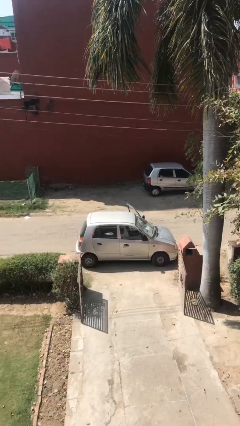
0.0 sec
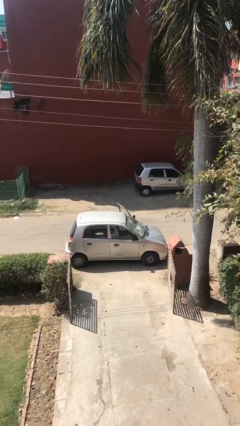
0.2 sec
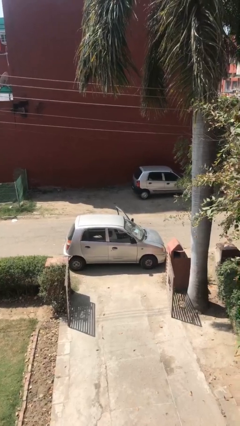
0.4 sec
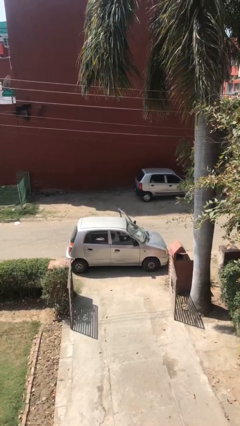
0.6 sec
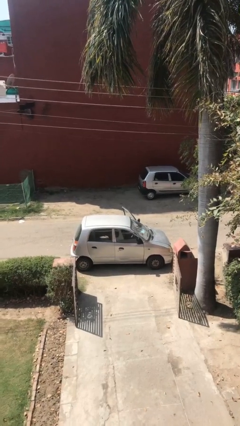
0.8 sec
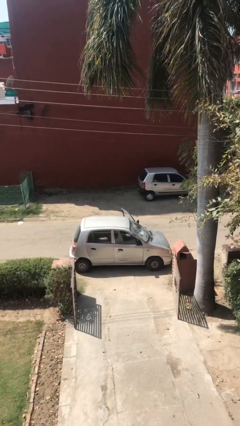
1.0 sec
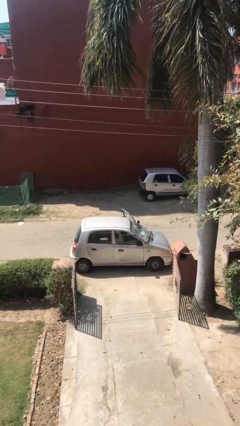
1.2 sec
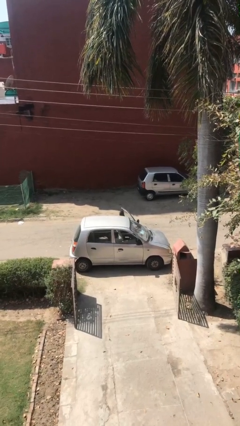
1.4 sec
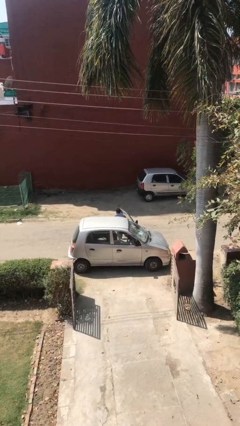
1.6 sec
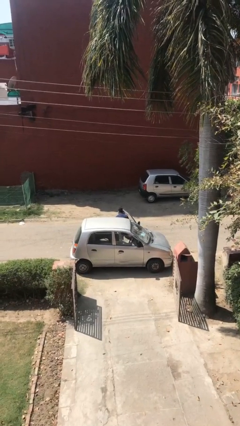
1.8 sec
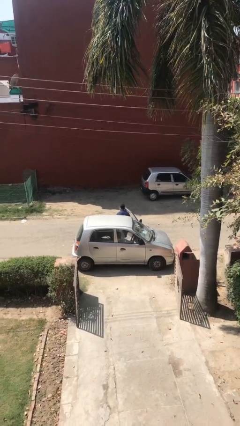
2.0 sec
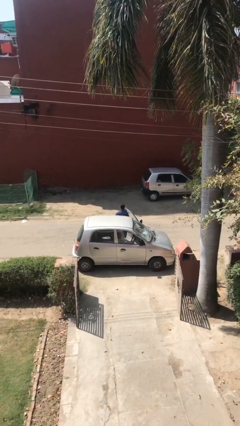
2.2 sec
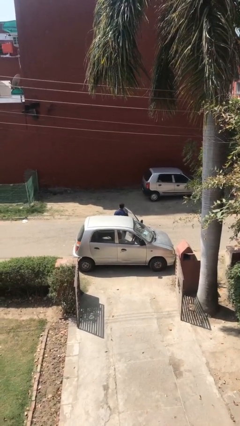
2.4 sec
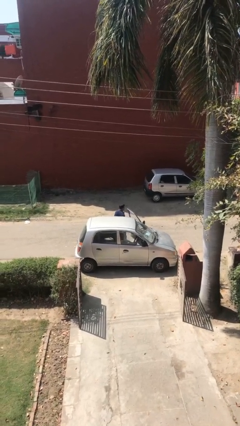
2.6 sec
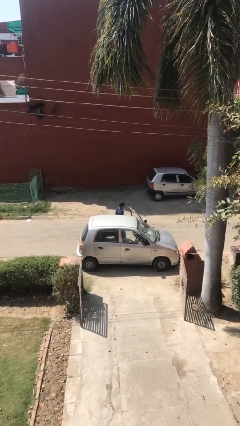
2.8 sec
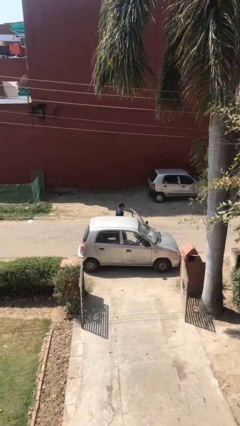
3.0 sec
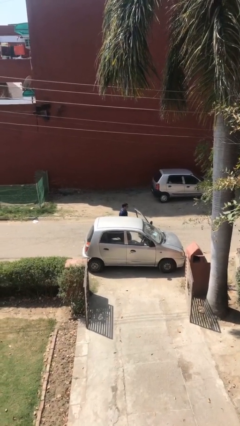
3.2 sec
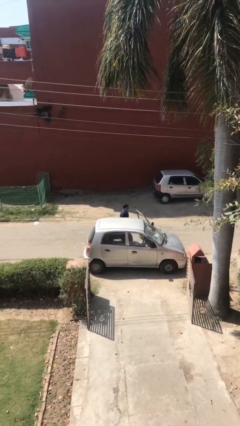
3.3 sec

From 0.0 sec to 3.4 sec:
person exits car

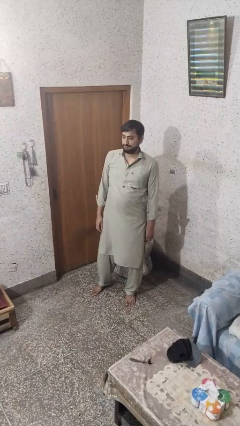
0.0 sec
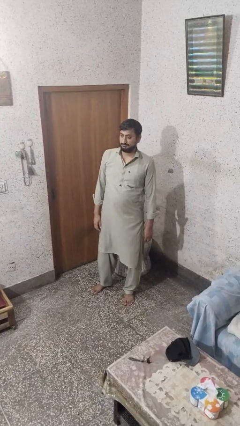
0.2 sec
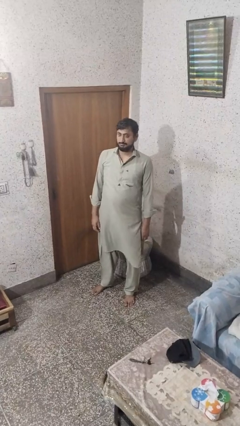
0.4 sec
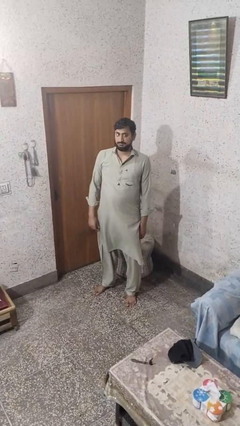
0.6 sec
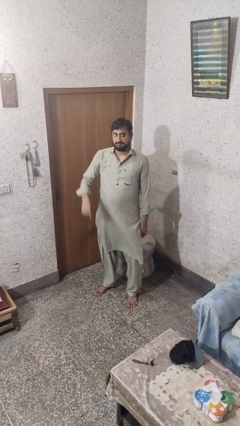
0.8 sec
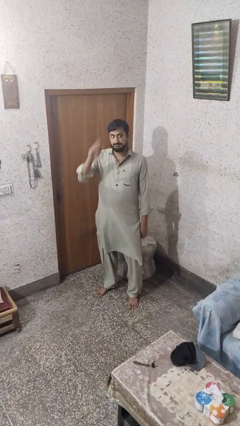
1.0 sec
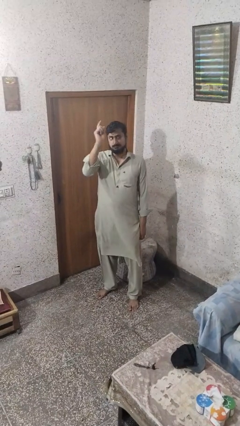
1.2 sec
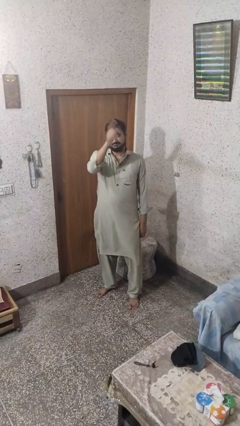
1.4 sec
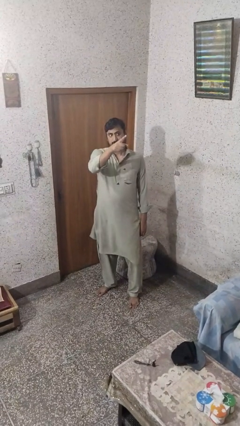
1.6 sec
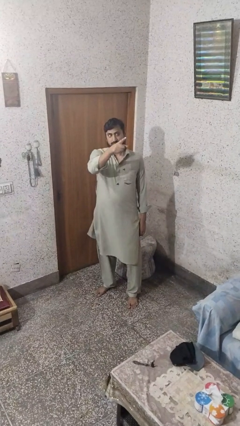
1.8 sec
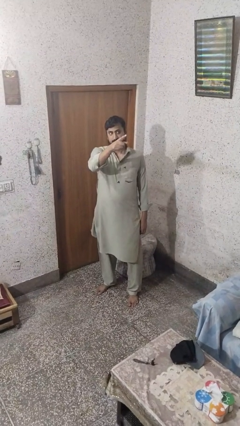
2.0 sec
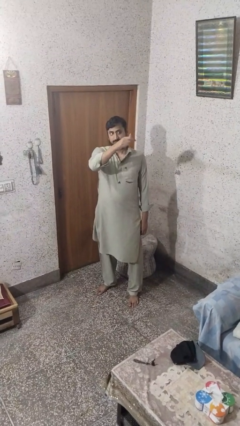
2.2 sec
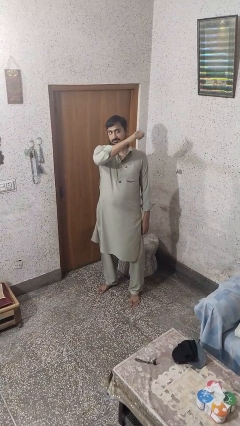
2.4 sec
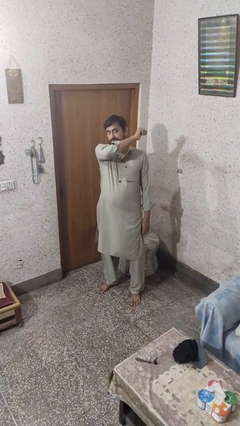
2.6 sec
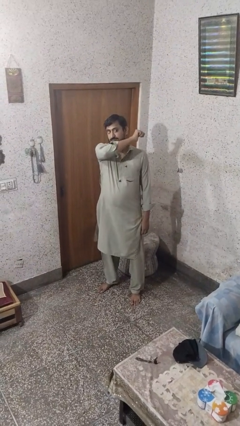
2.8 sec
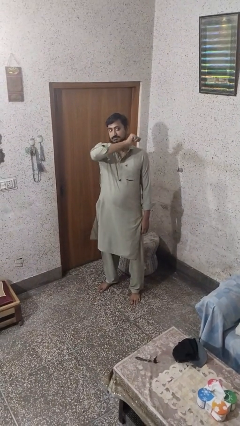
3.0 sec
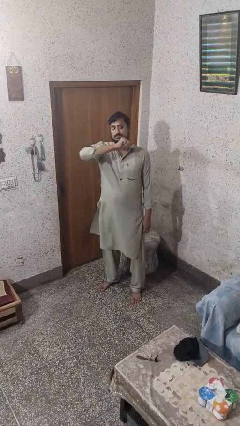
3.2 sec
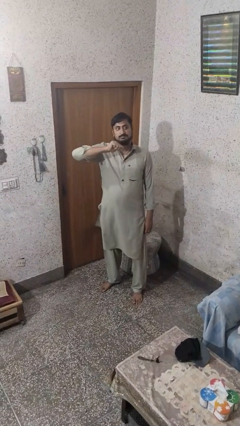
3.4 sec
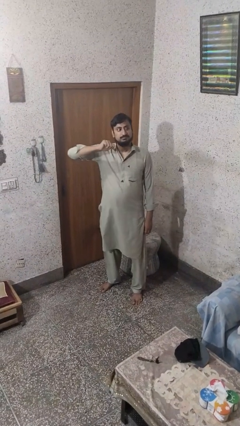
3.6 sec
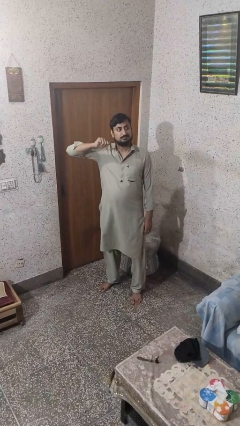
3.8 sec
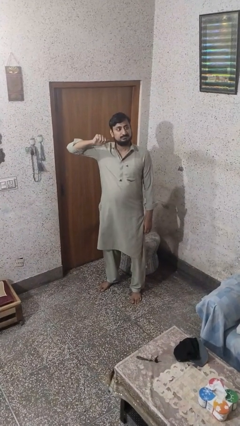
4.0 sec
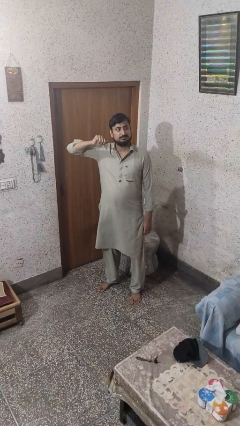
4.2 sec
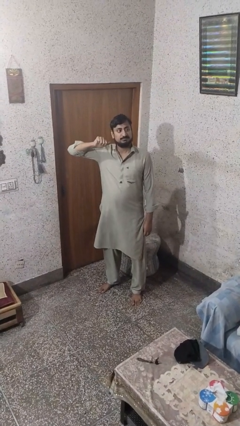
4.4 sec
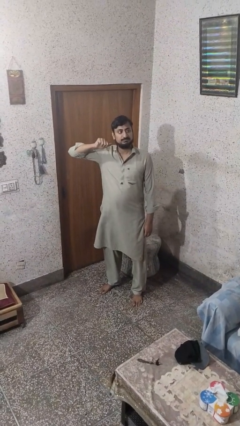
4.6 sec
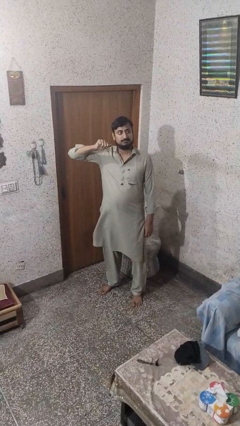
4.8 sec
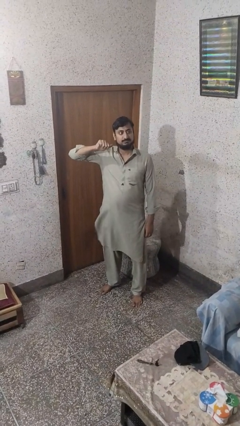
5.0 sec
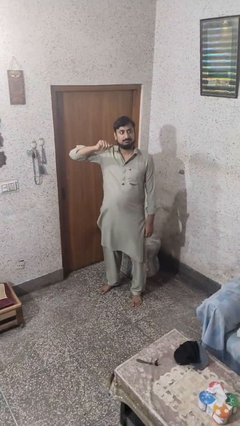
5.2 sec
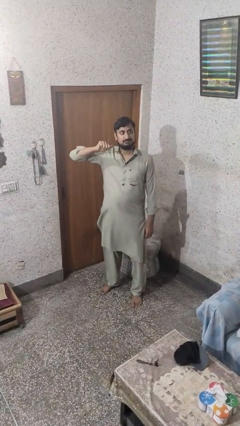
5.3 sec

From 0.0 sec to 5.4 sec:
person gestures cut

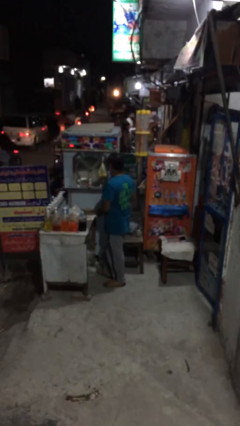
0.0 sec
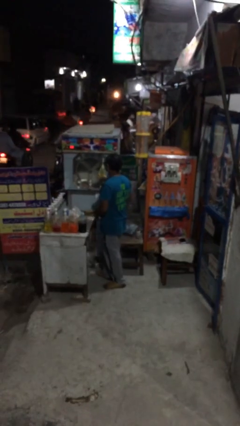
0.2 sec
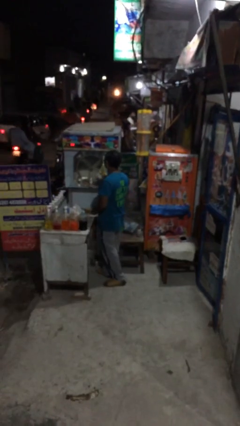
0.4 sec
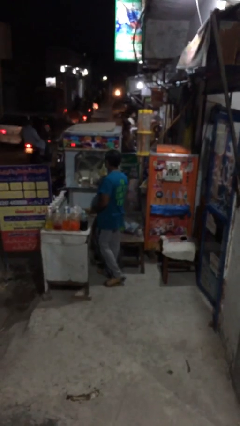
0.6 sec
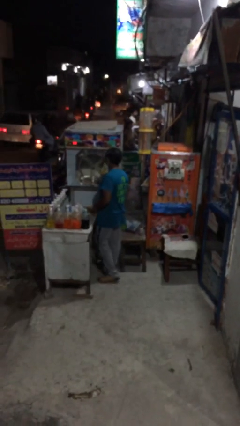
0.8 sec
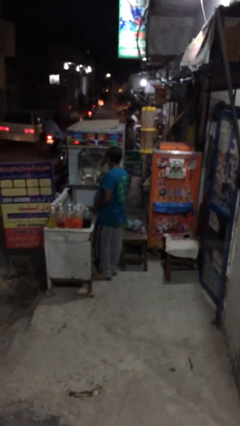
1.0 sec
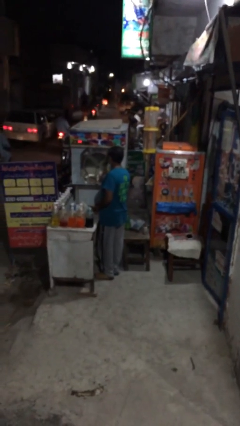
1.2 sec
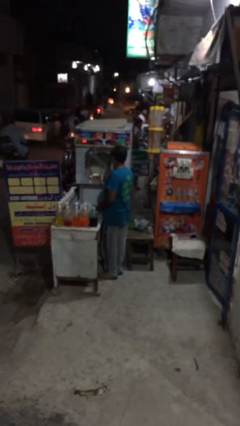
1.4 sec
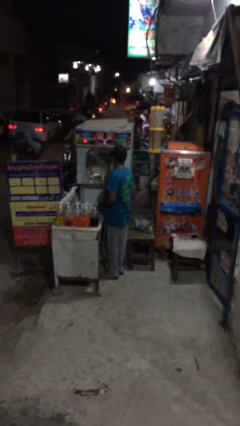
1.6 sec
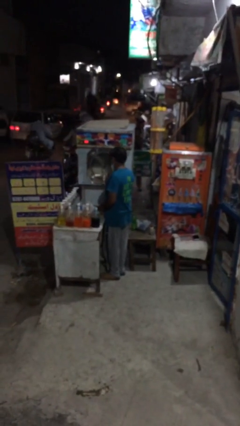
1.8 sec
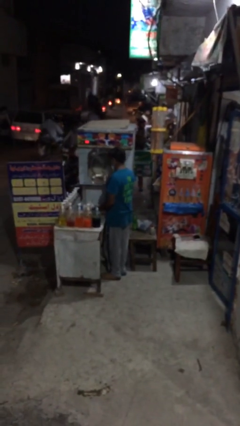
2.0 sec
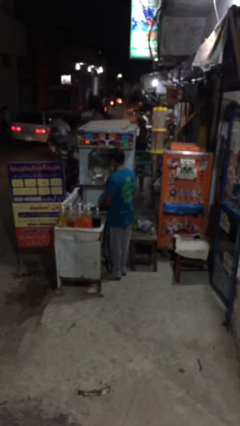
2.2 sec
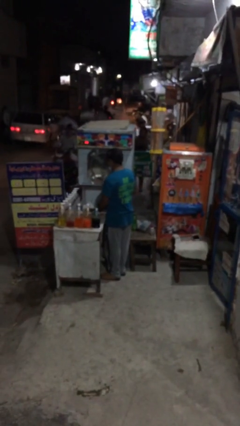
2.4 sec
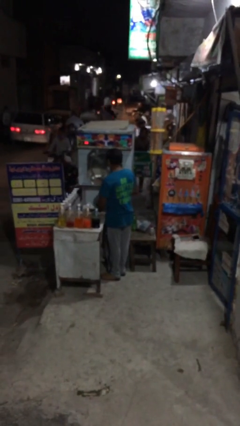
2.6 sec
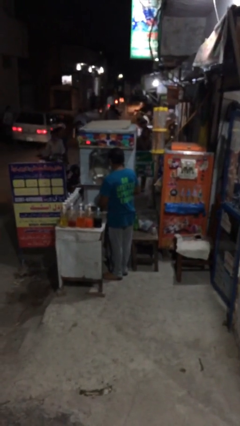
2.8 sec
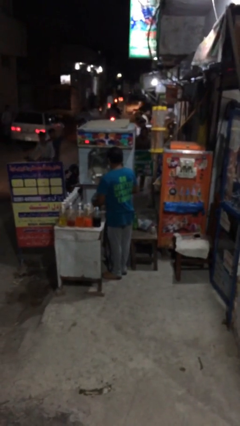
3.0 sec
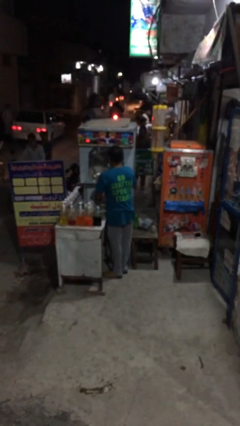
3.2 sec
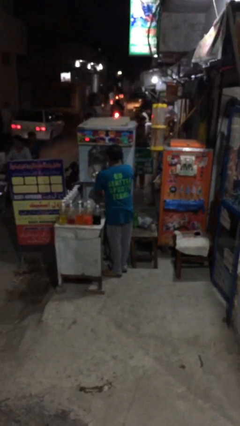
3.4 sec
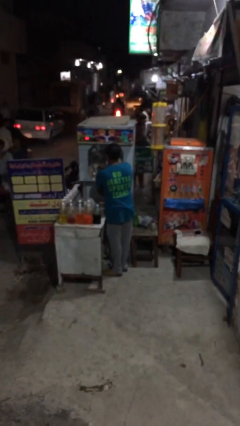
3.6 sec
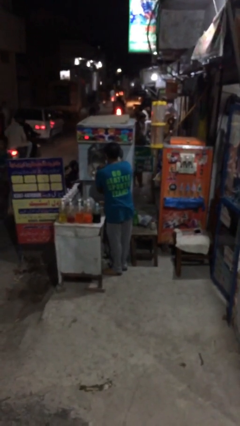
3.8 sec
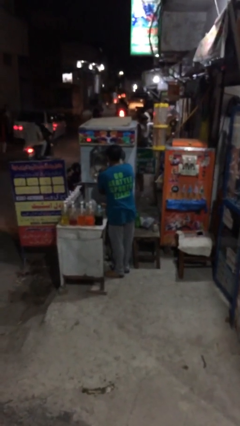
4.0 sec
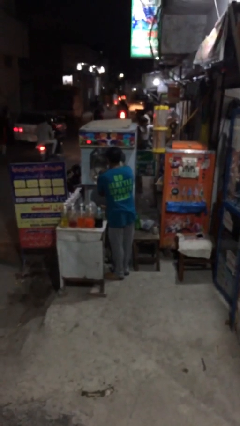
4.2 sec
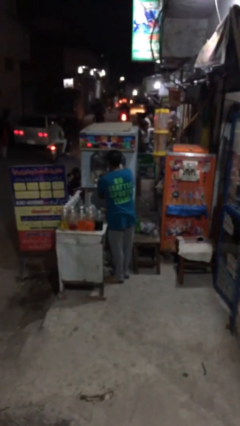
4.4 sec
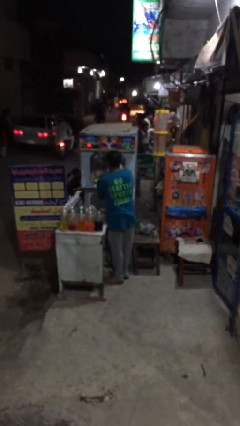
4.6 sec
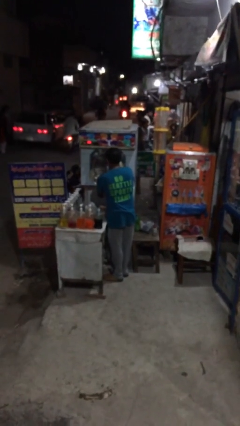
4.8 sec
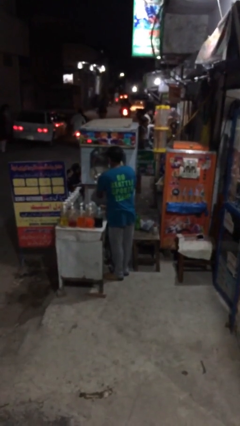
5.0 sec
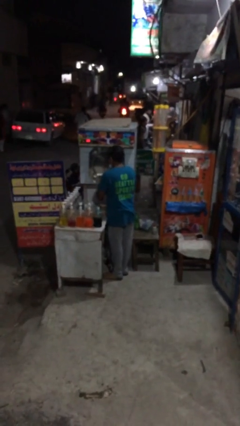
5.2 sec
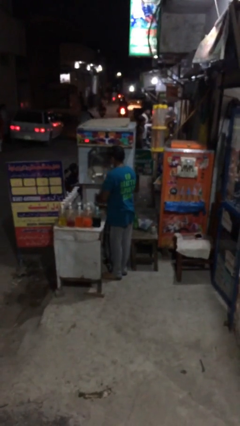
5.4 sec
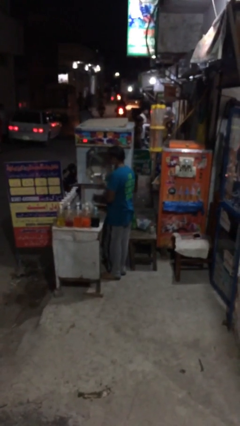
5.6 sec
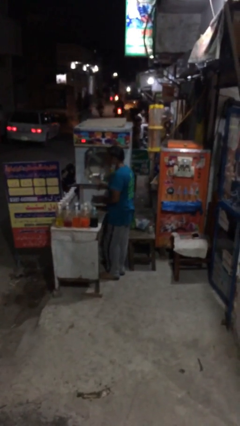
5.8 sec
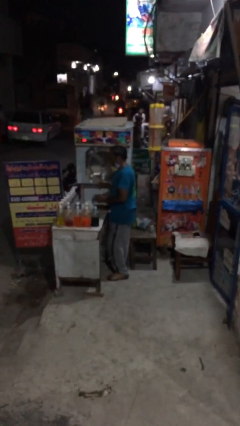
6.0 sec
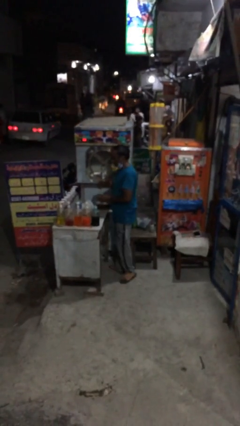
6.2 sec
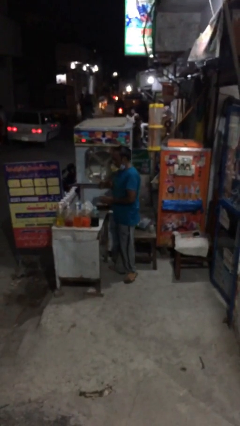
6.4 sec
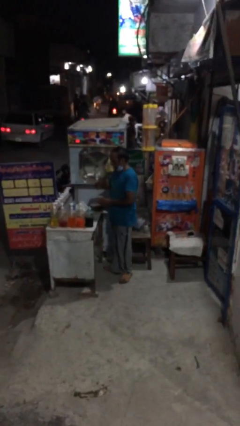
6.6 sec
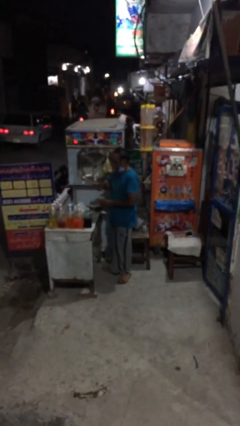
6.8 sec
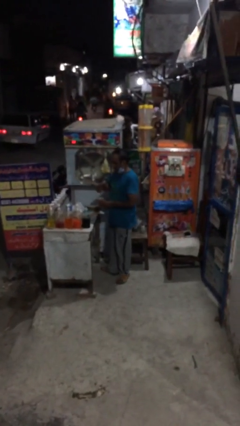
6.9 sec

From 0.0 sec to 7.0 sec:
person purchases from machine

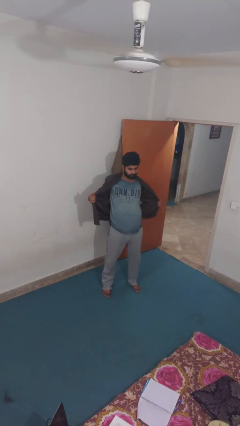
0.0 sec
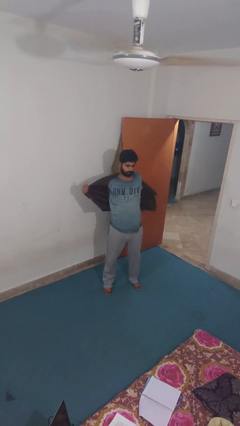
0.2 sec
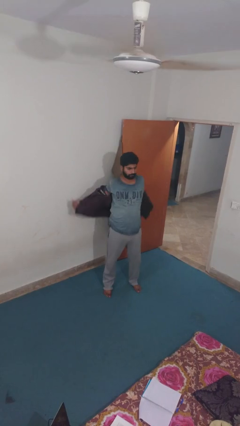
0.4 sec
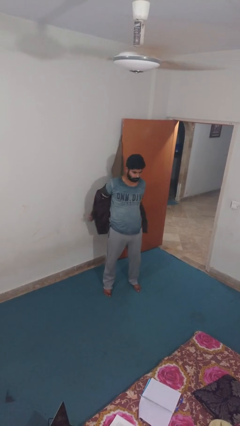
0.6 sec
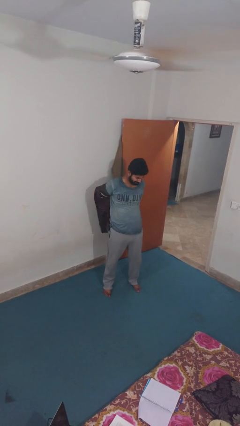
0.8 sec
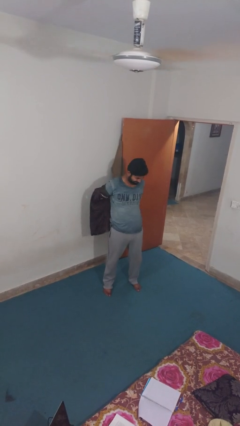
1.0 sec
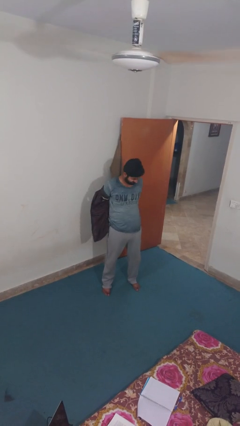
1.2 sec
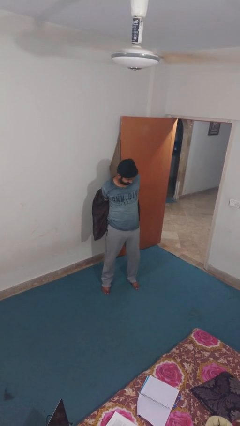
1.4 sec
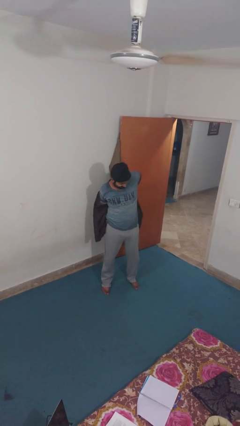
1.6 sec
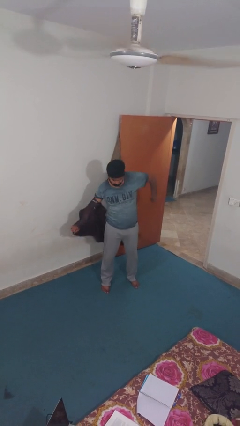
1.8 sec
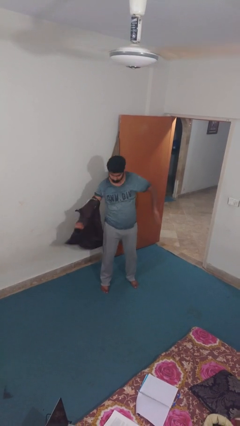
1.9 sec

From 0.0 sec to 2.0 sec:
person takes off jacket
